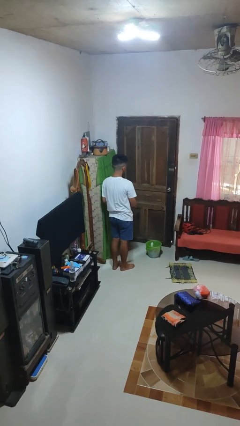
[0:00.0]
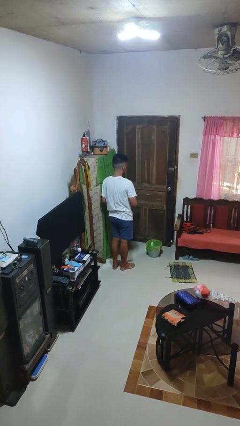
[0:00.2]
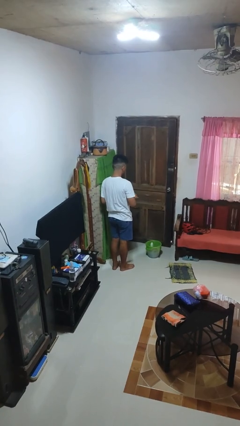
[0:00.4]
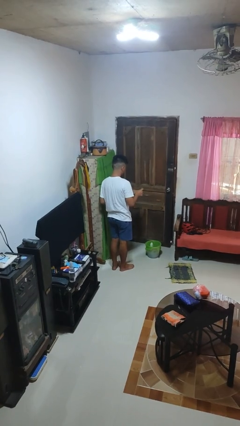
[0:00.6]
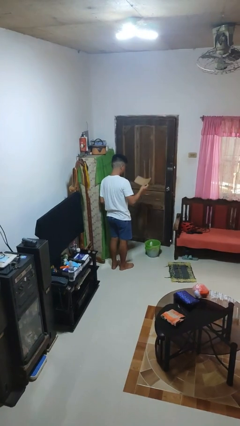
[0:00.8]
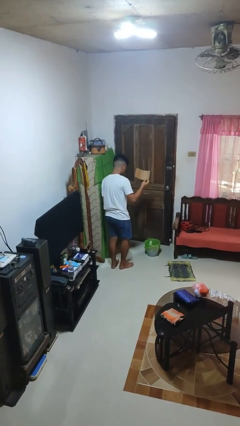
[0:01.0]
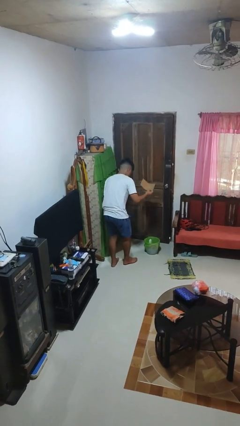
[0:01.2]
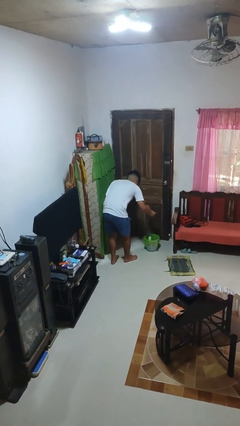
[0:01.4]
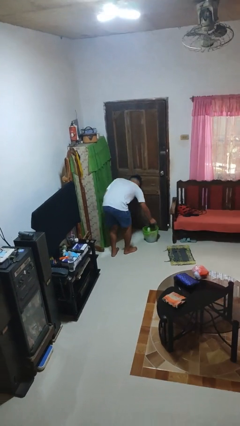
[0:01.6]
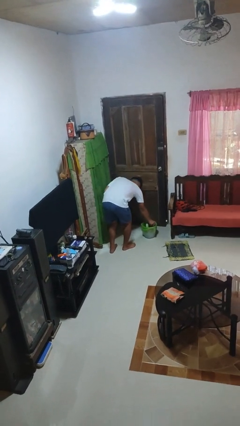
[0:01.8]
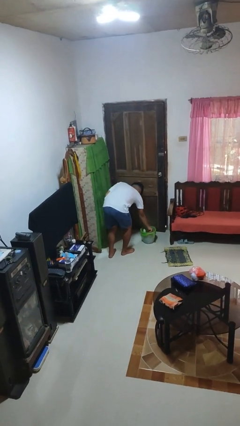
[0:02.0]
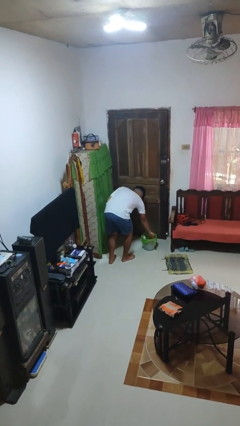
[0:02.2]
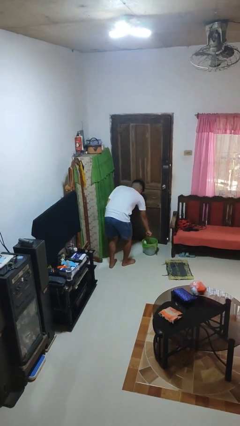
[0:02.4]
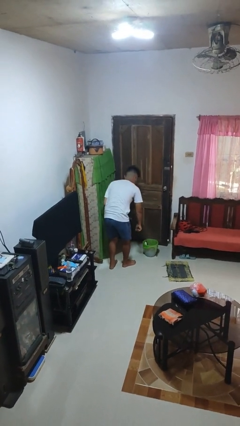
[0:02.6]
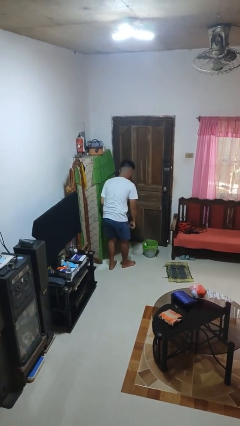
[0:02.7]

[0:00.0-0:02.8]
person discards trash

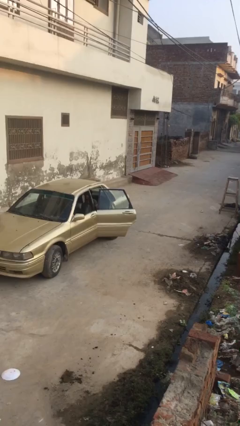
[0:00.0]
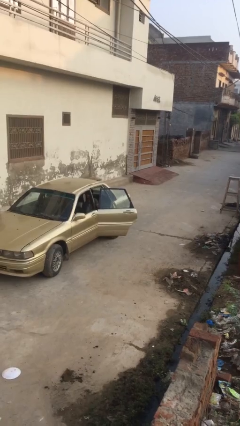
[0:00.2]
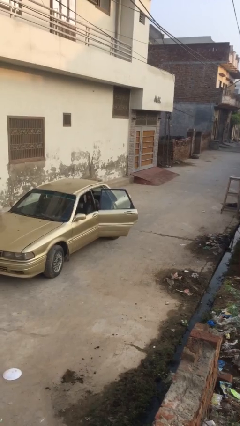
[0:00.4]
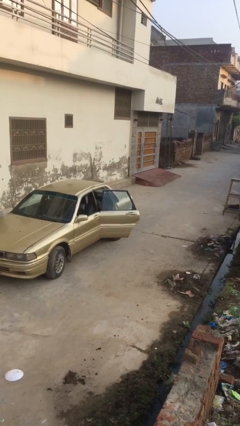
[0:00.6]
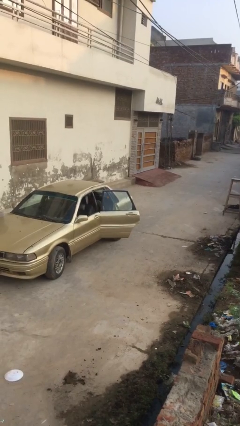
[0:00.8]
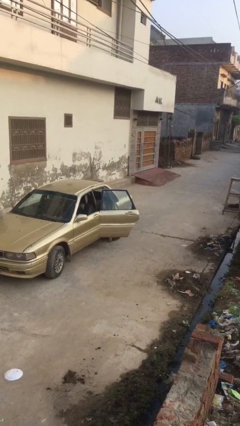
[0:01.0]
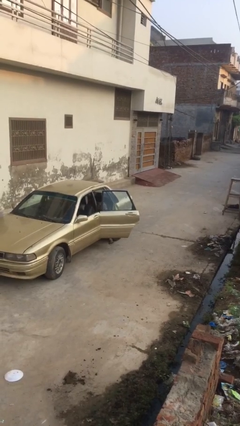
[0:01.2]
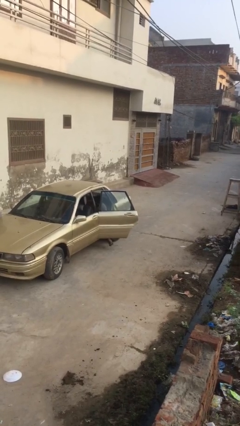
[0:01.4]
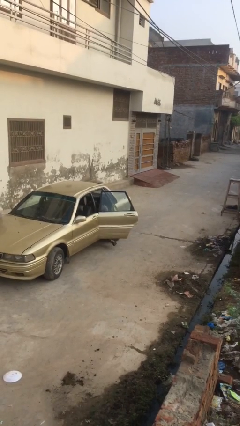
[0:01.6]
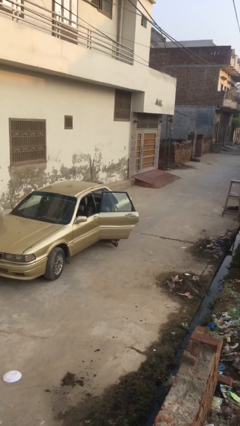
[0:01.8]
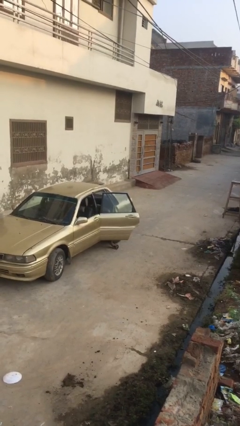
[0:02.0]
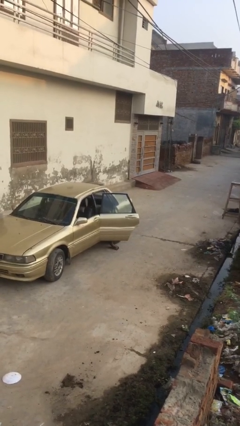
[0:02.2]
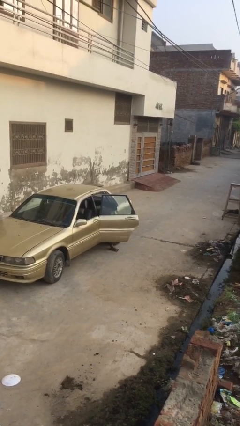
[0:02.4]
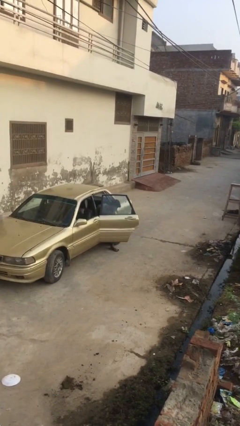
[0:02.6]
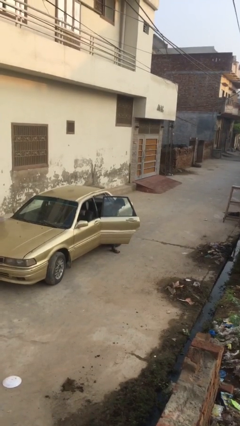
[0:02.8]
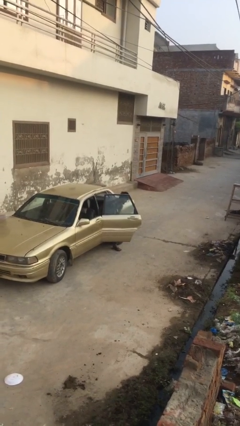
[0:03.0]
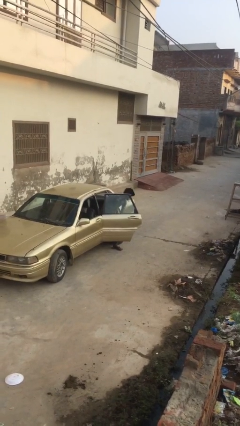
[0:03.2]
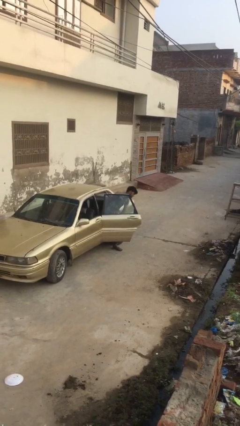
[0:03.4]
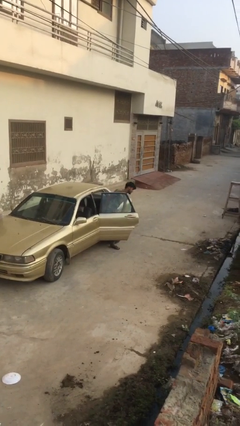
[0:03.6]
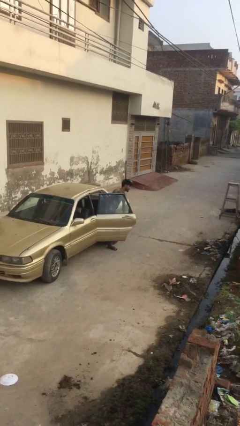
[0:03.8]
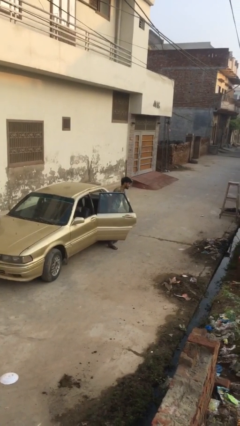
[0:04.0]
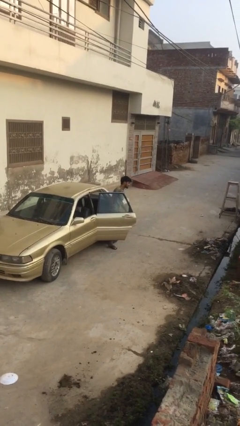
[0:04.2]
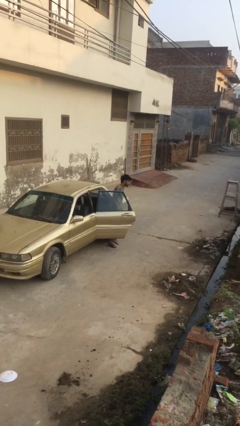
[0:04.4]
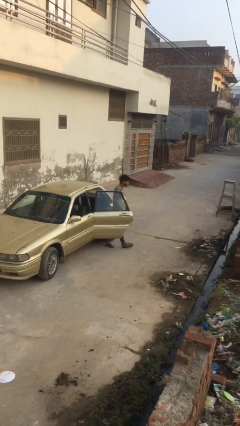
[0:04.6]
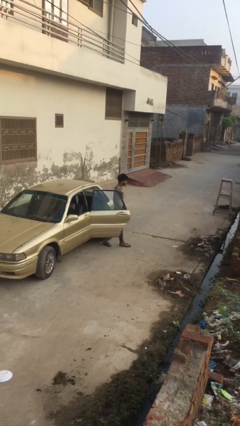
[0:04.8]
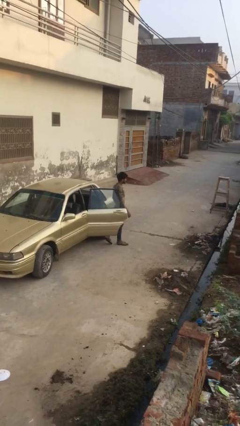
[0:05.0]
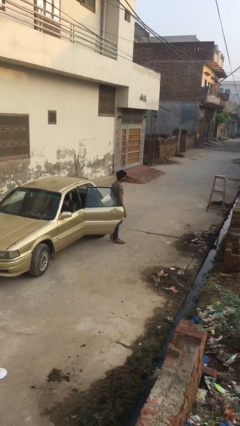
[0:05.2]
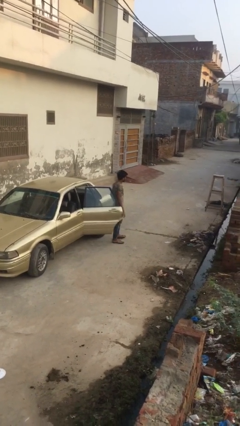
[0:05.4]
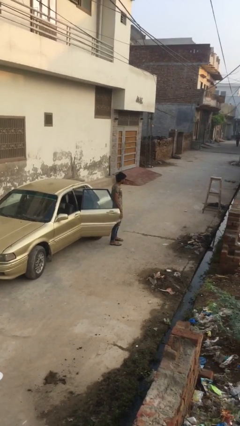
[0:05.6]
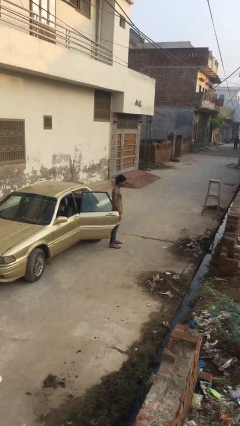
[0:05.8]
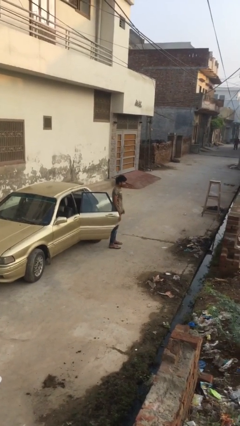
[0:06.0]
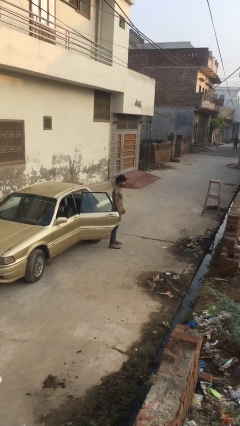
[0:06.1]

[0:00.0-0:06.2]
person exits car

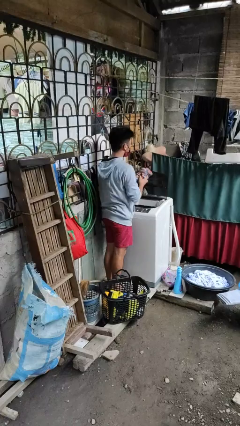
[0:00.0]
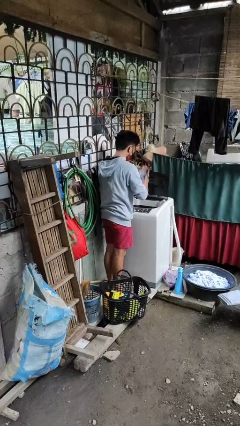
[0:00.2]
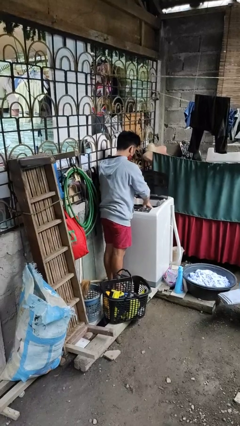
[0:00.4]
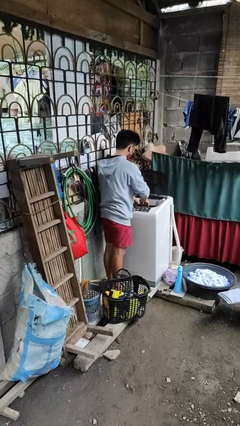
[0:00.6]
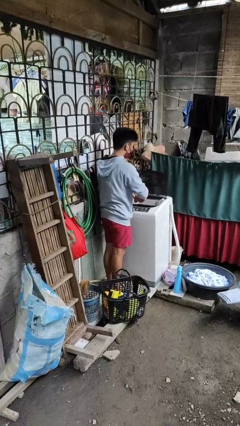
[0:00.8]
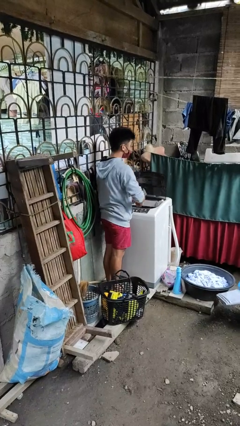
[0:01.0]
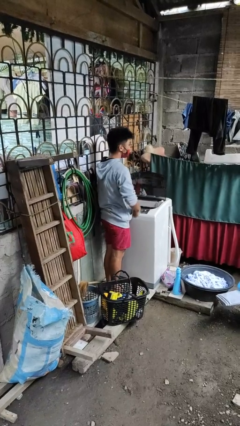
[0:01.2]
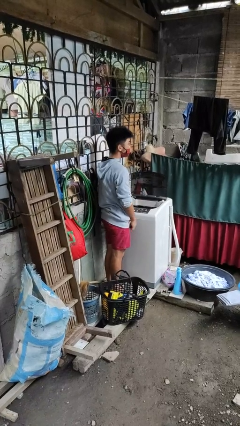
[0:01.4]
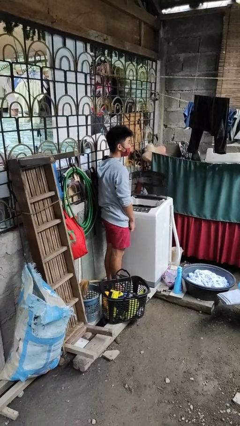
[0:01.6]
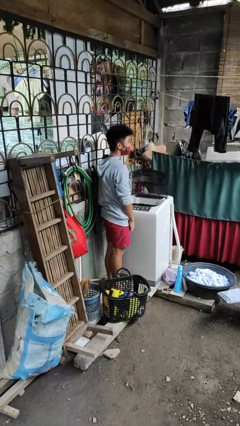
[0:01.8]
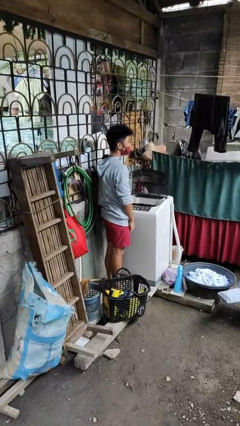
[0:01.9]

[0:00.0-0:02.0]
person loads dryer

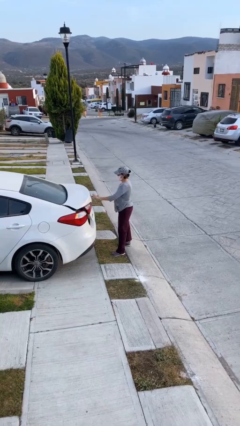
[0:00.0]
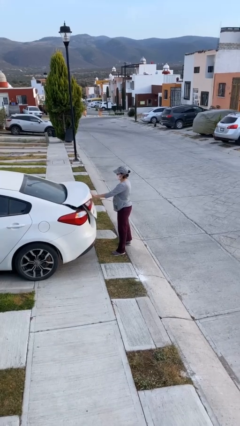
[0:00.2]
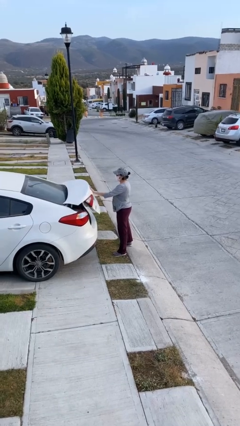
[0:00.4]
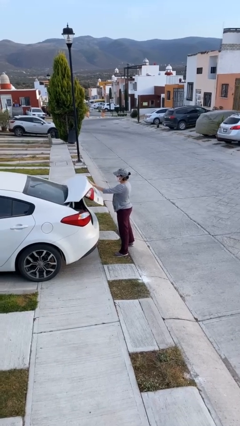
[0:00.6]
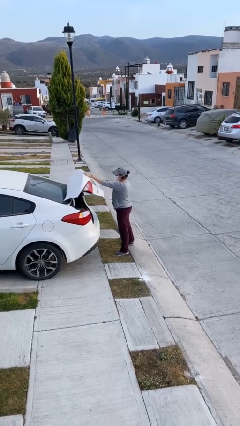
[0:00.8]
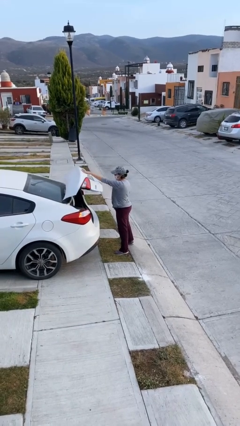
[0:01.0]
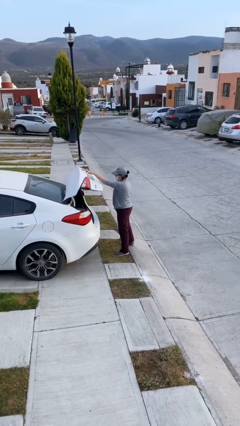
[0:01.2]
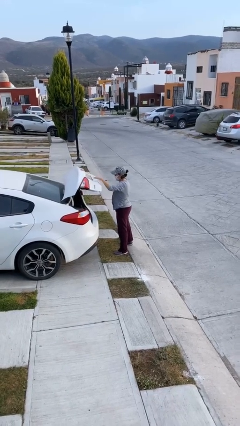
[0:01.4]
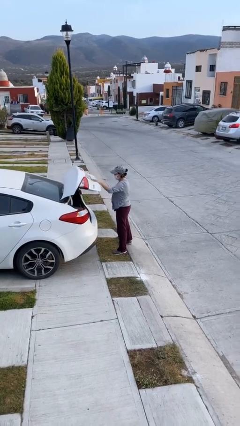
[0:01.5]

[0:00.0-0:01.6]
person opens car trunk

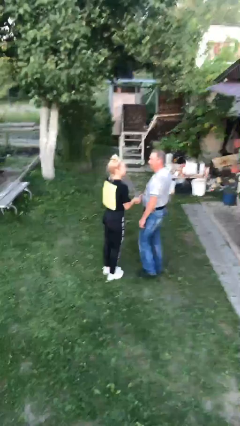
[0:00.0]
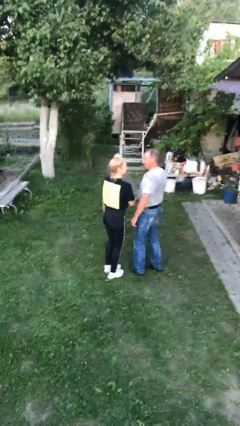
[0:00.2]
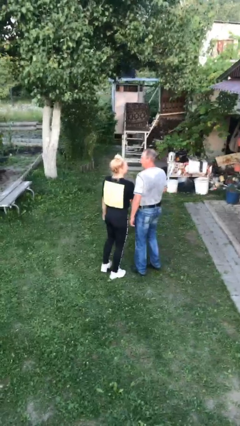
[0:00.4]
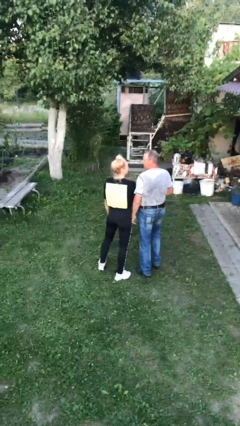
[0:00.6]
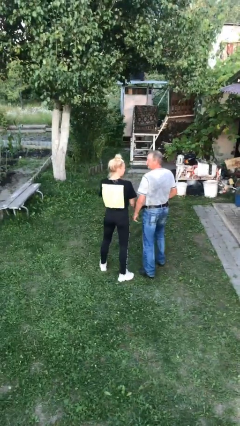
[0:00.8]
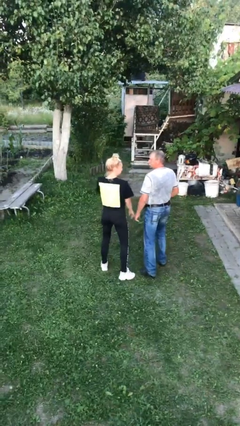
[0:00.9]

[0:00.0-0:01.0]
person shakes hand

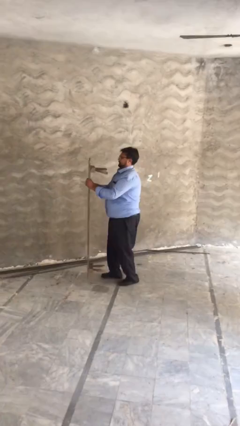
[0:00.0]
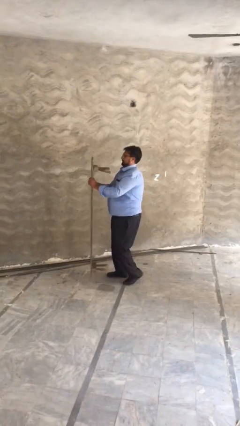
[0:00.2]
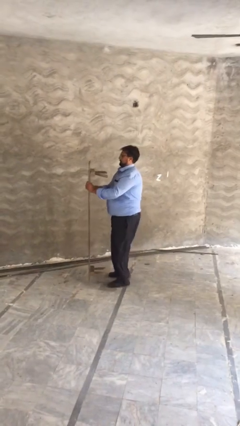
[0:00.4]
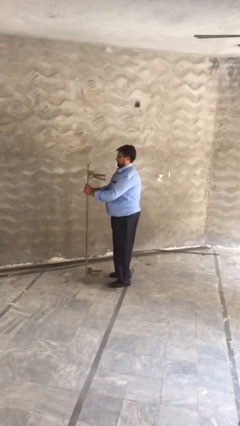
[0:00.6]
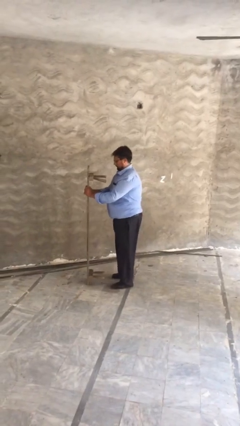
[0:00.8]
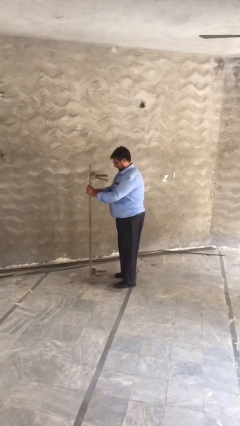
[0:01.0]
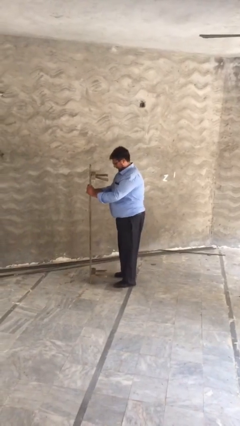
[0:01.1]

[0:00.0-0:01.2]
person puts down object on floor

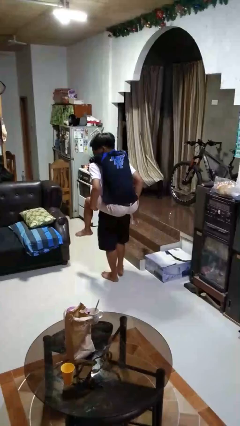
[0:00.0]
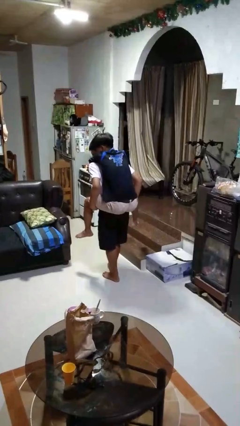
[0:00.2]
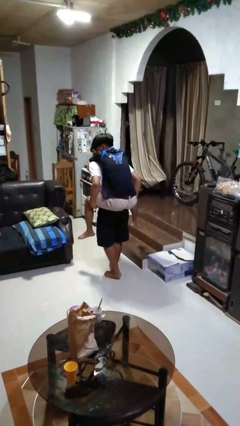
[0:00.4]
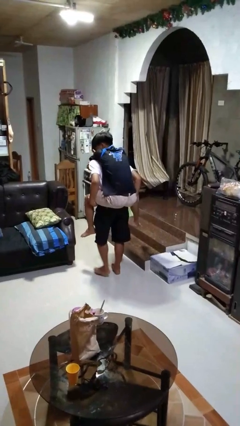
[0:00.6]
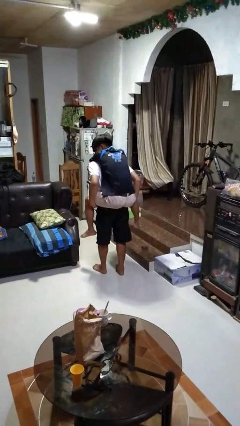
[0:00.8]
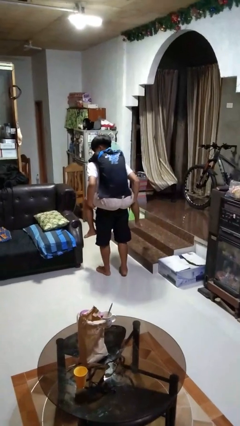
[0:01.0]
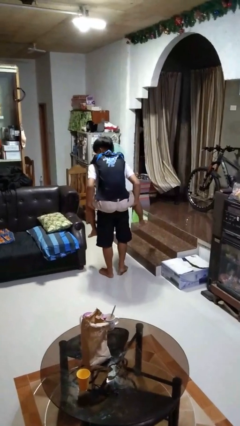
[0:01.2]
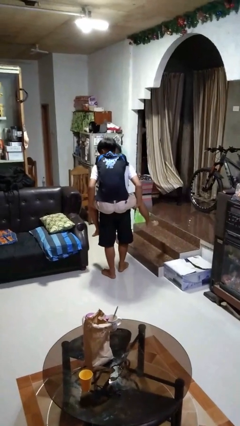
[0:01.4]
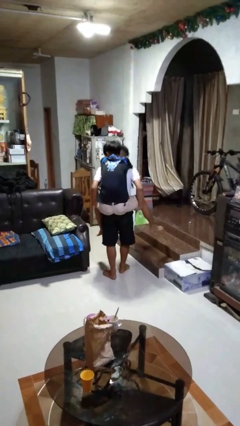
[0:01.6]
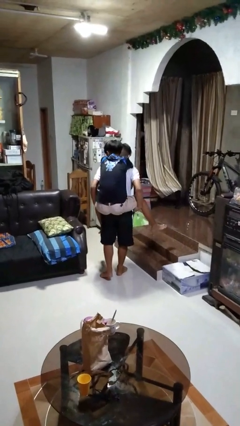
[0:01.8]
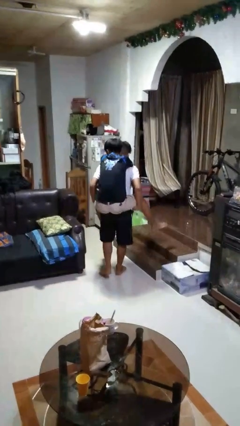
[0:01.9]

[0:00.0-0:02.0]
person carries person on back

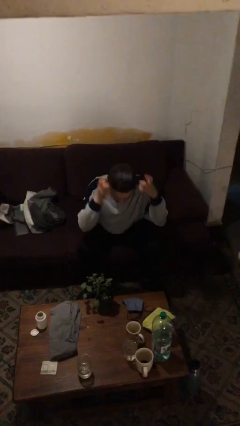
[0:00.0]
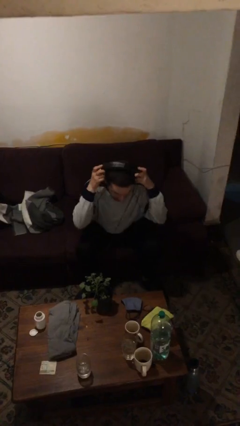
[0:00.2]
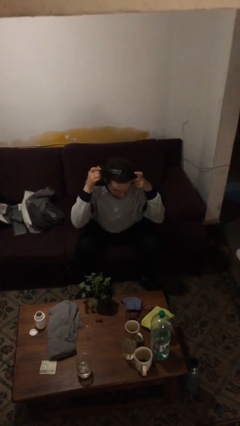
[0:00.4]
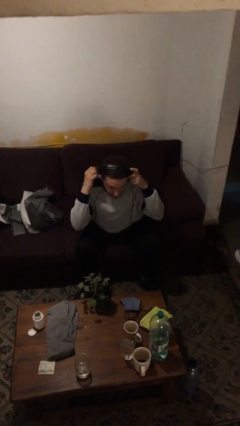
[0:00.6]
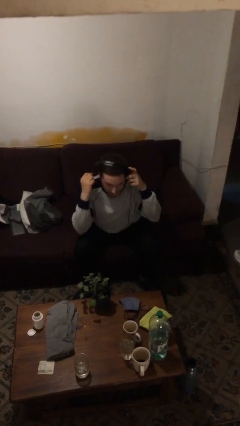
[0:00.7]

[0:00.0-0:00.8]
person puts on headphones
